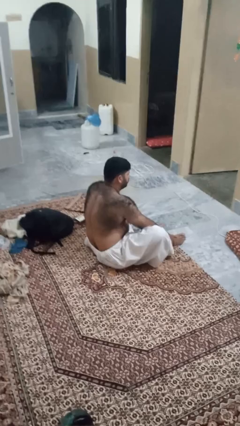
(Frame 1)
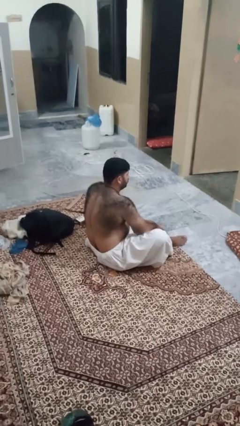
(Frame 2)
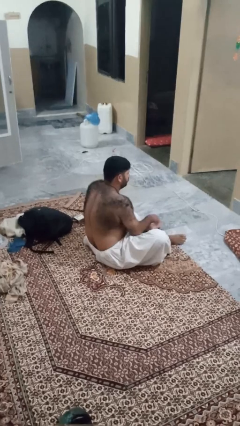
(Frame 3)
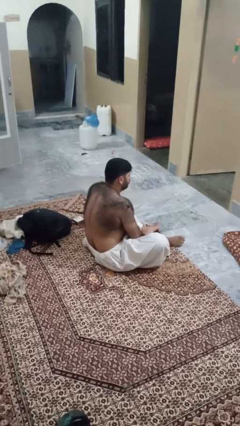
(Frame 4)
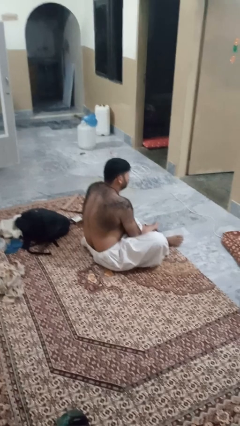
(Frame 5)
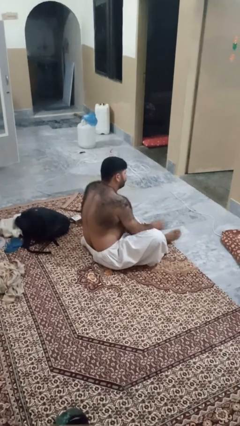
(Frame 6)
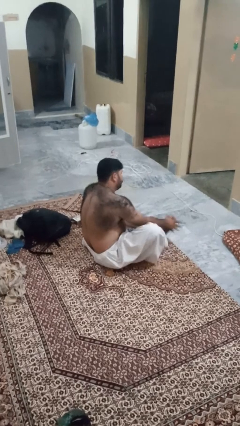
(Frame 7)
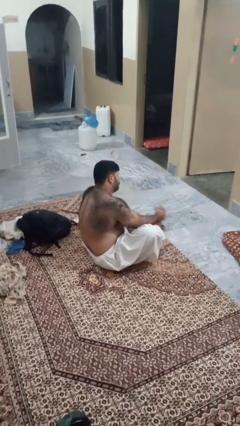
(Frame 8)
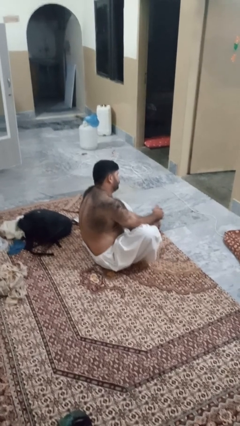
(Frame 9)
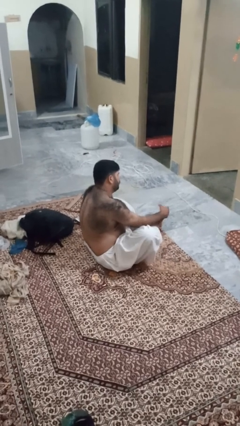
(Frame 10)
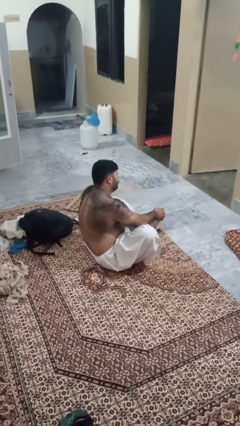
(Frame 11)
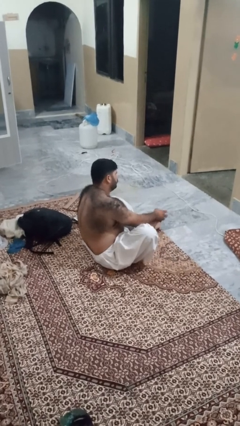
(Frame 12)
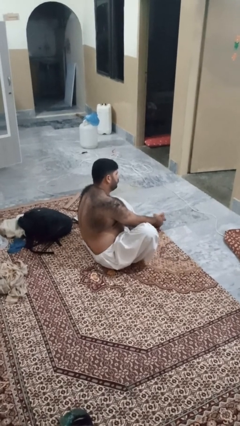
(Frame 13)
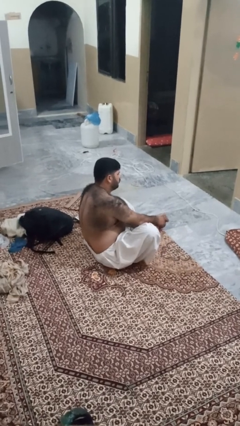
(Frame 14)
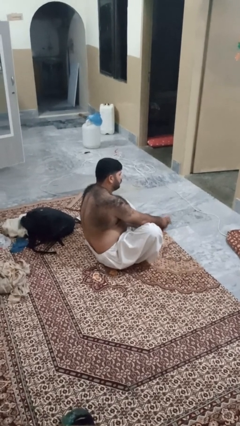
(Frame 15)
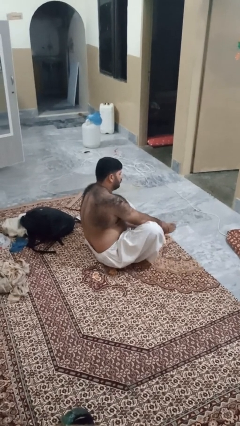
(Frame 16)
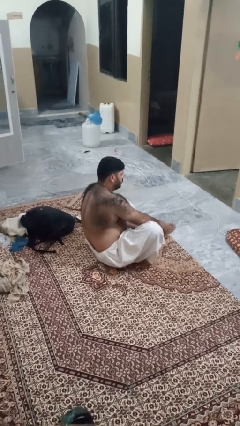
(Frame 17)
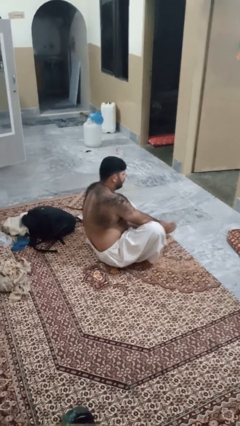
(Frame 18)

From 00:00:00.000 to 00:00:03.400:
person rubs foot

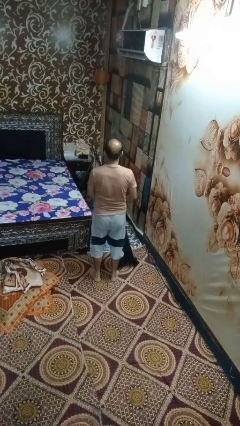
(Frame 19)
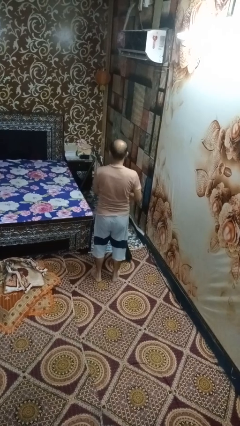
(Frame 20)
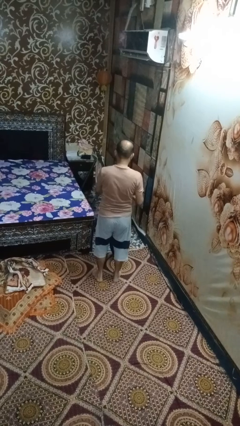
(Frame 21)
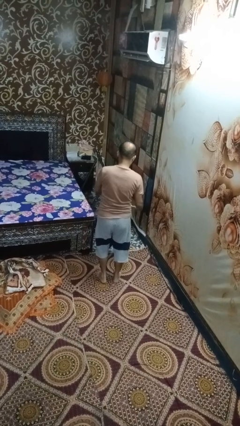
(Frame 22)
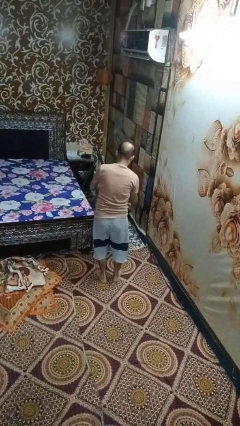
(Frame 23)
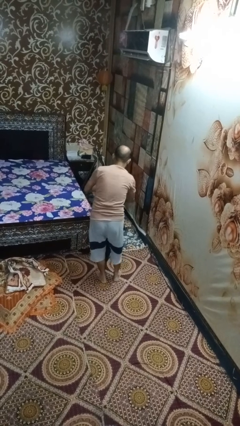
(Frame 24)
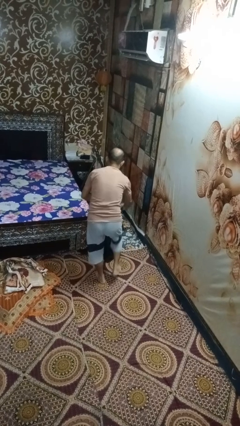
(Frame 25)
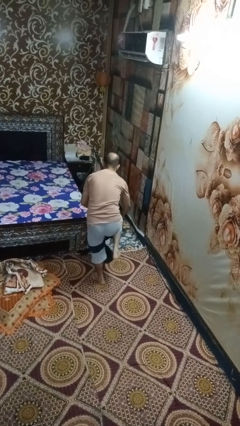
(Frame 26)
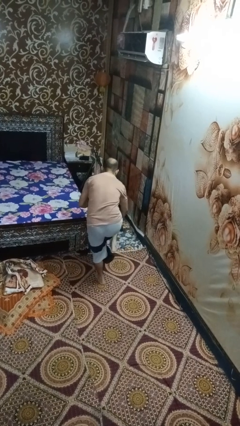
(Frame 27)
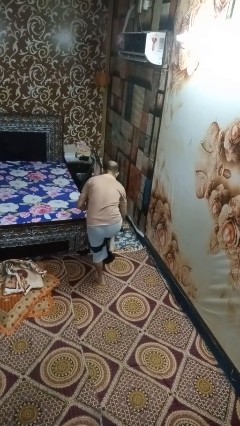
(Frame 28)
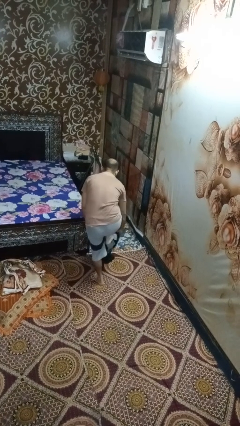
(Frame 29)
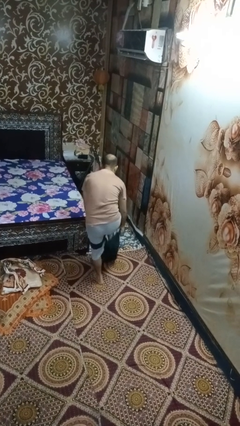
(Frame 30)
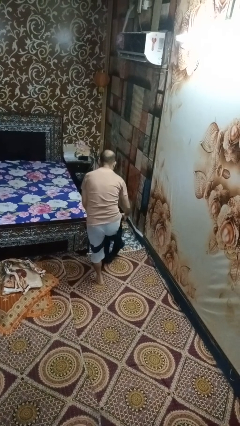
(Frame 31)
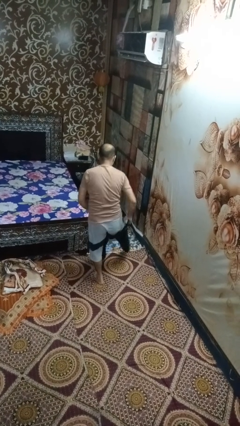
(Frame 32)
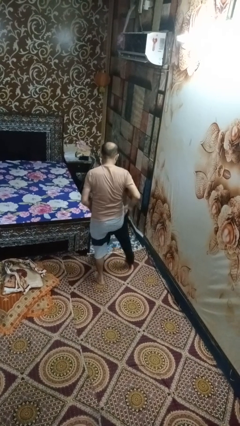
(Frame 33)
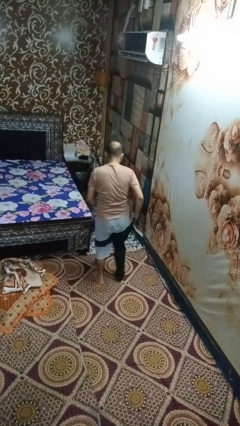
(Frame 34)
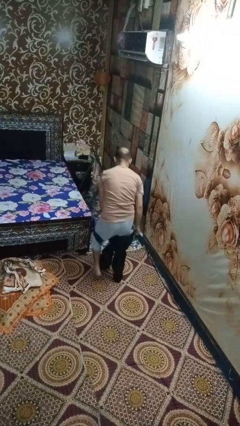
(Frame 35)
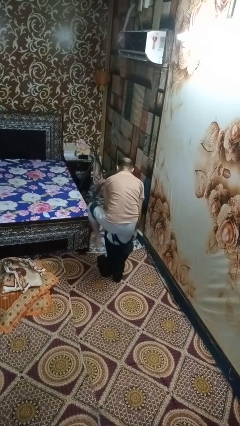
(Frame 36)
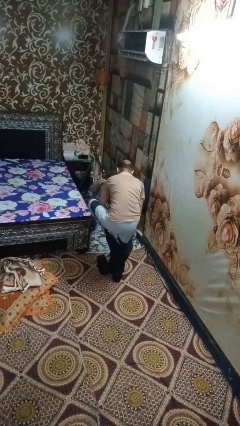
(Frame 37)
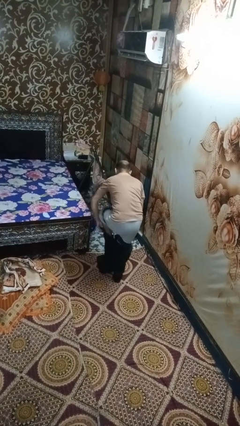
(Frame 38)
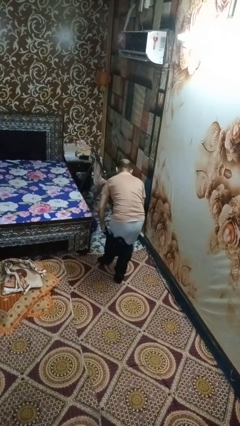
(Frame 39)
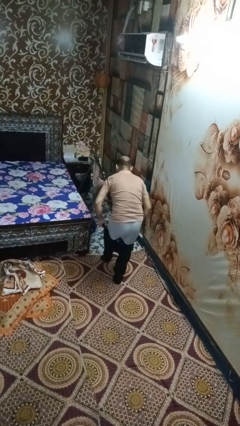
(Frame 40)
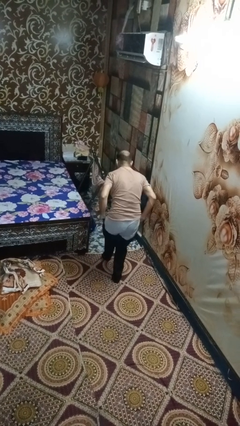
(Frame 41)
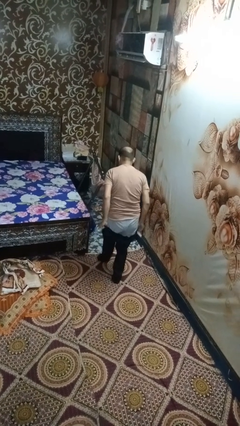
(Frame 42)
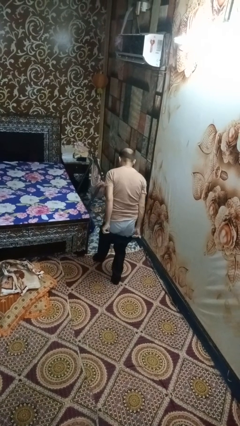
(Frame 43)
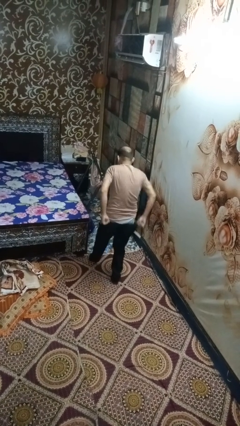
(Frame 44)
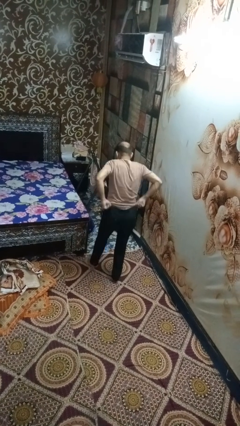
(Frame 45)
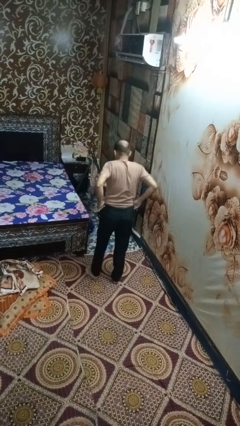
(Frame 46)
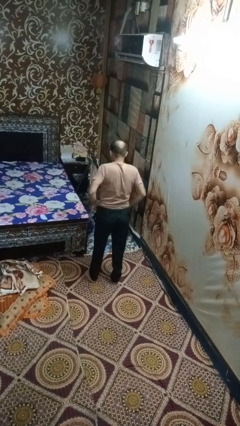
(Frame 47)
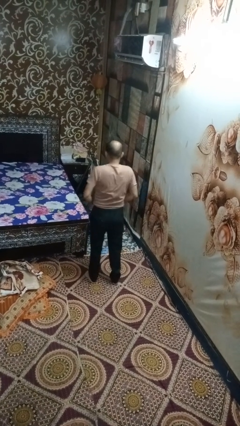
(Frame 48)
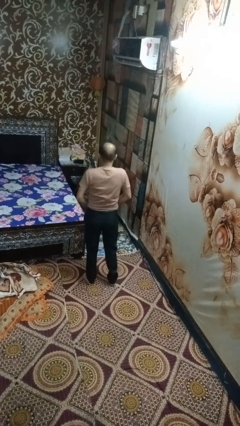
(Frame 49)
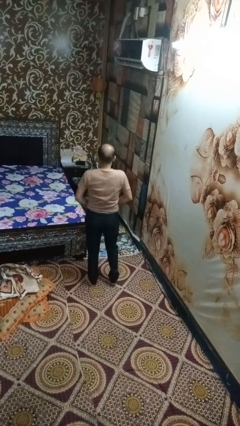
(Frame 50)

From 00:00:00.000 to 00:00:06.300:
person puts on pants

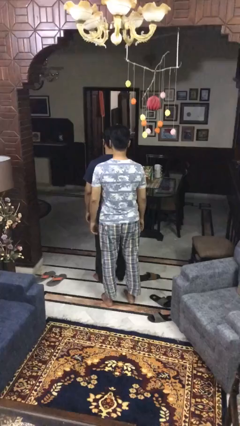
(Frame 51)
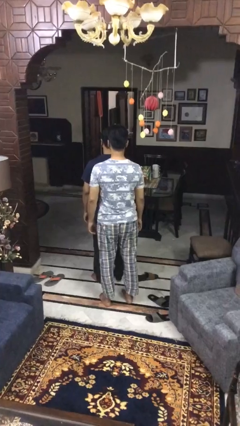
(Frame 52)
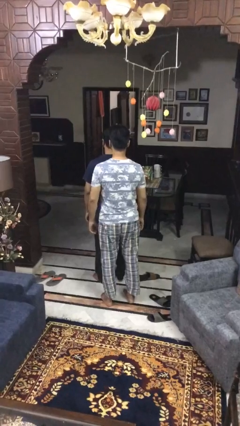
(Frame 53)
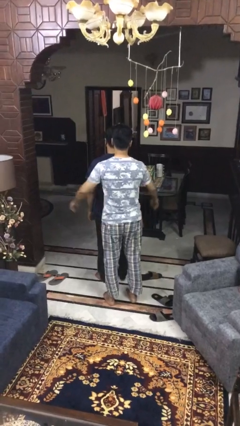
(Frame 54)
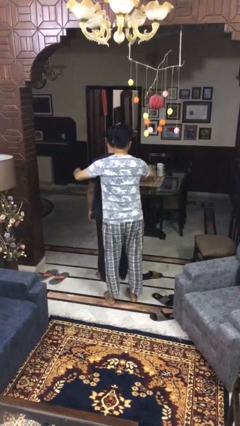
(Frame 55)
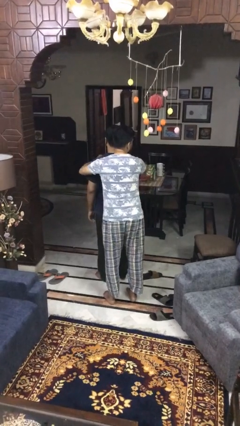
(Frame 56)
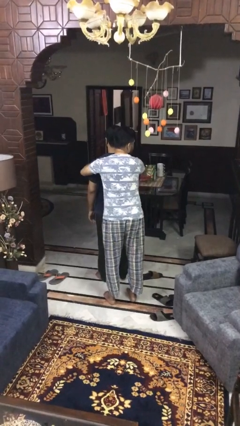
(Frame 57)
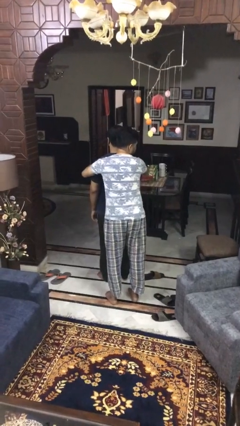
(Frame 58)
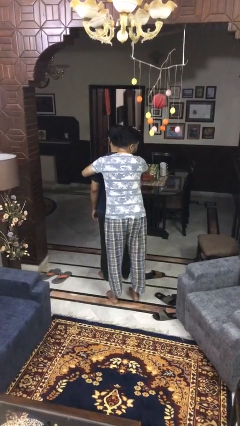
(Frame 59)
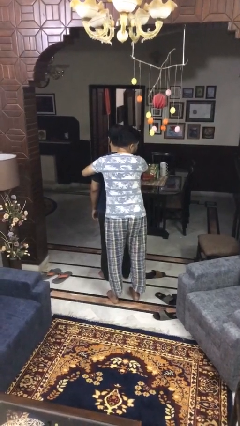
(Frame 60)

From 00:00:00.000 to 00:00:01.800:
person hugs person from behind

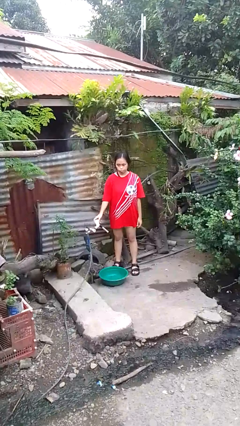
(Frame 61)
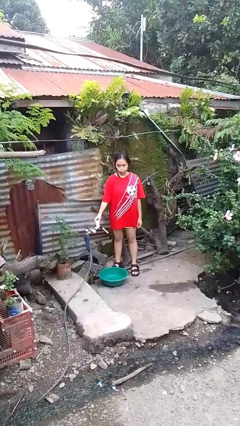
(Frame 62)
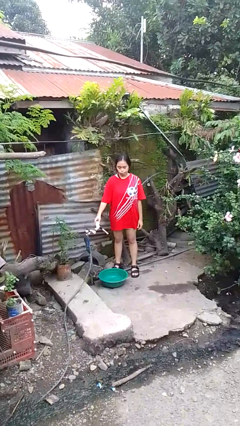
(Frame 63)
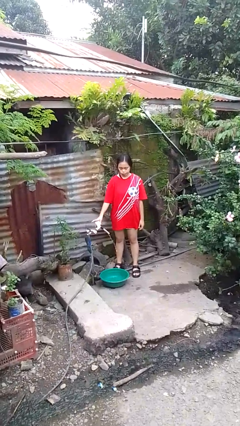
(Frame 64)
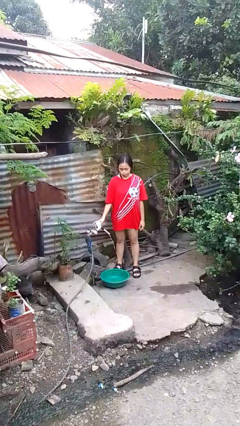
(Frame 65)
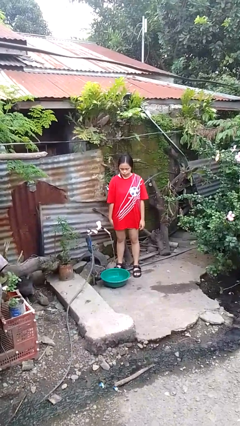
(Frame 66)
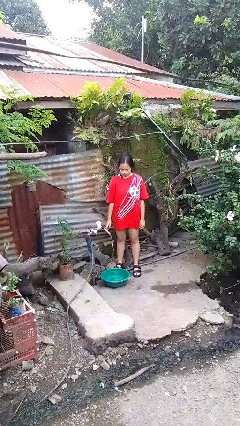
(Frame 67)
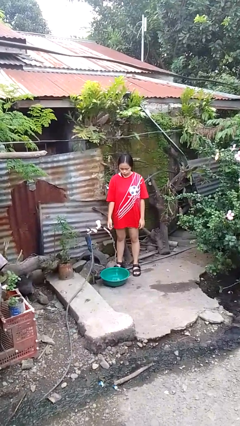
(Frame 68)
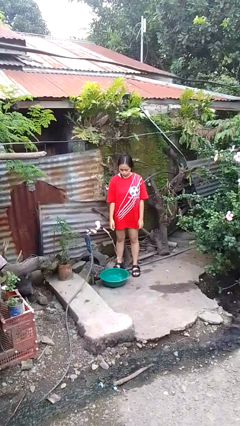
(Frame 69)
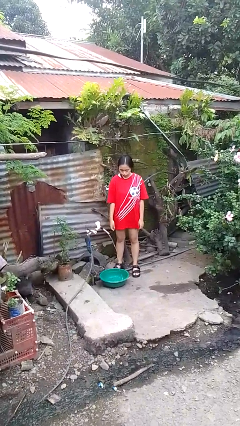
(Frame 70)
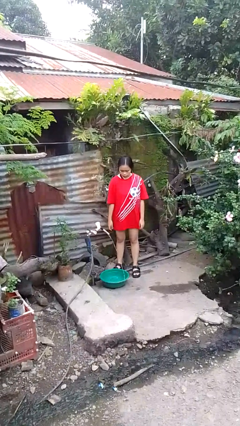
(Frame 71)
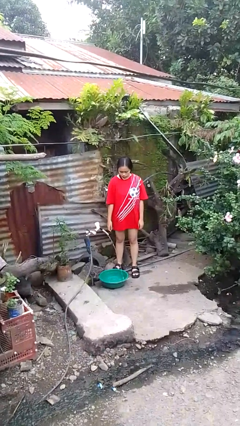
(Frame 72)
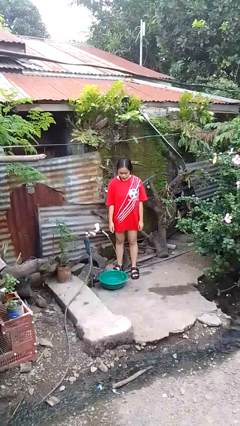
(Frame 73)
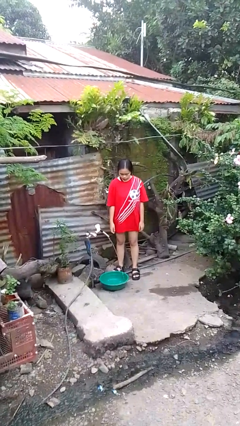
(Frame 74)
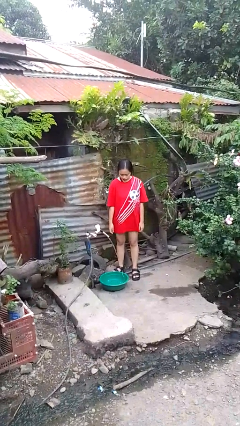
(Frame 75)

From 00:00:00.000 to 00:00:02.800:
person turns on faucet

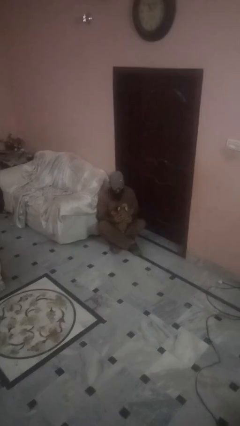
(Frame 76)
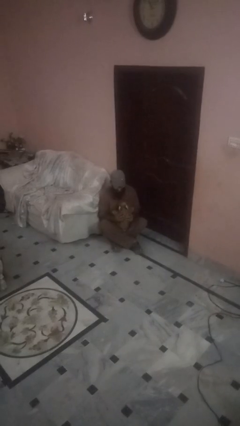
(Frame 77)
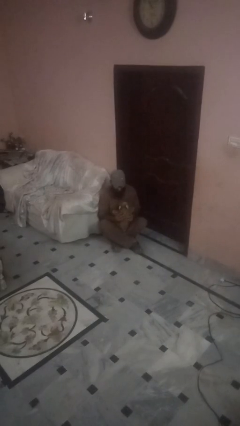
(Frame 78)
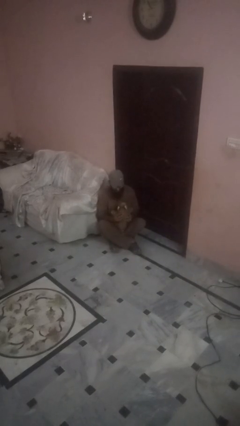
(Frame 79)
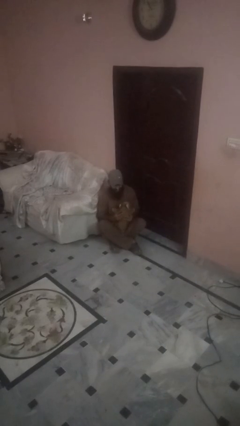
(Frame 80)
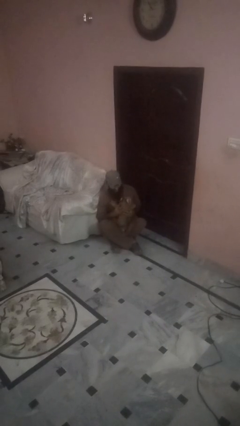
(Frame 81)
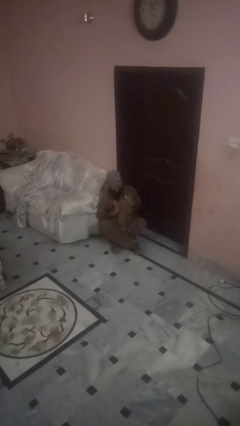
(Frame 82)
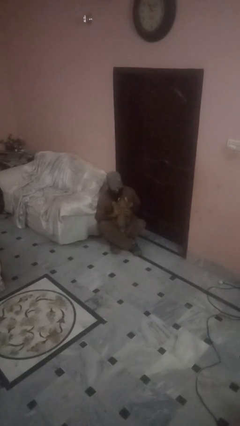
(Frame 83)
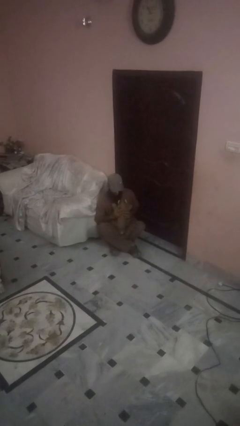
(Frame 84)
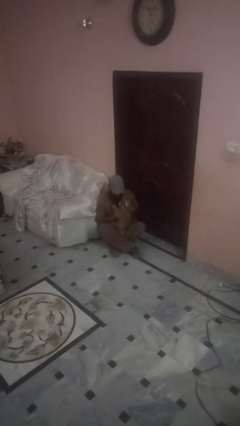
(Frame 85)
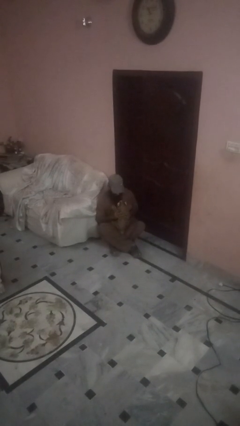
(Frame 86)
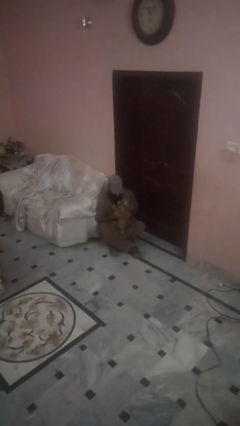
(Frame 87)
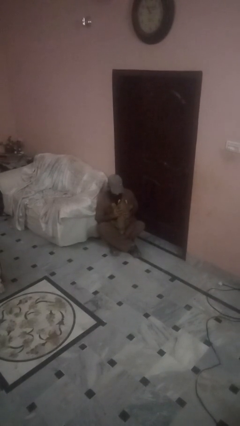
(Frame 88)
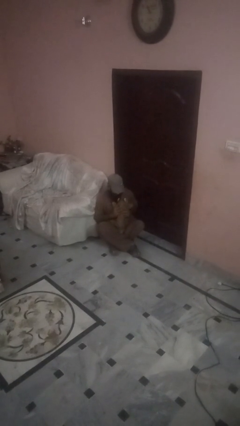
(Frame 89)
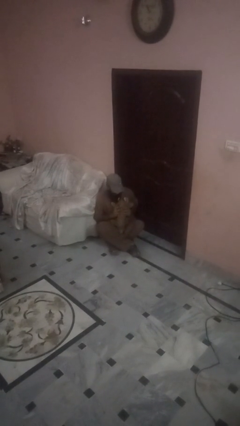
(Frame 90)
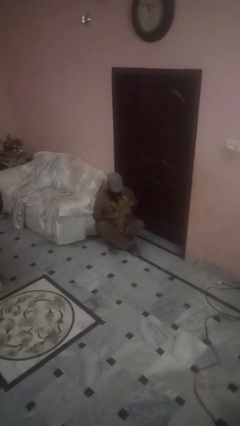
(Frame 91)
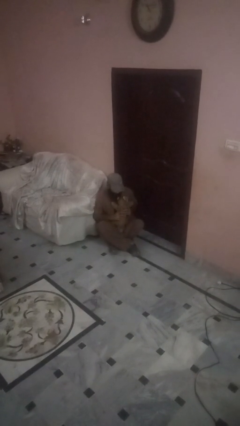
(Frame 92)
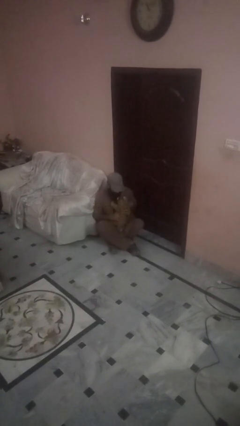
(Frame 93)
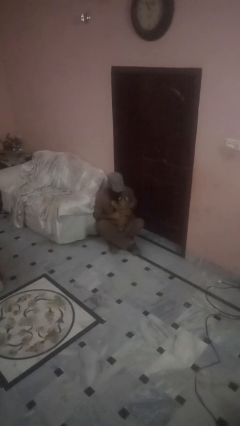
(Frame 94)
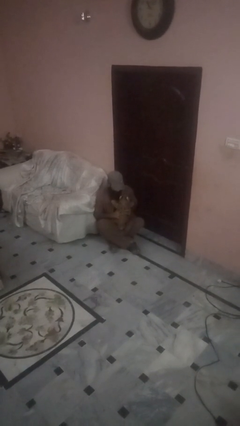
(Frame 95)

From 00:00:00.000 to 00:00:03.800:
person hugs dog
